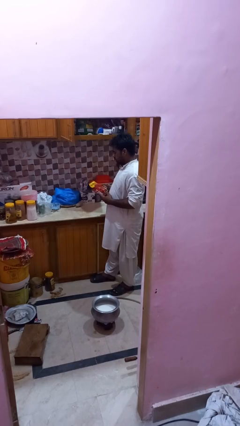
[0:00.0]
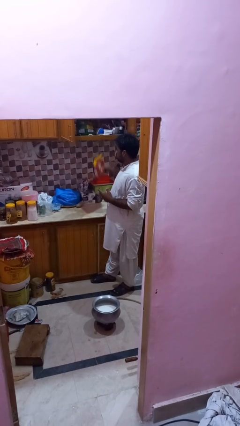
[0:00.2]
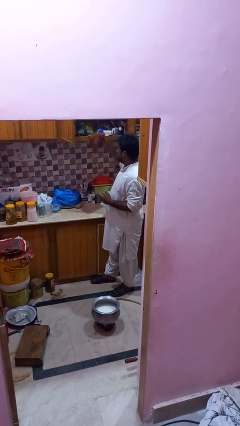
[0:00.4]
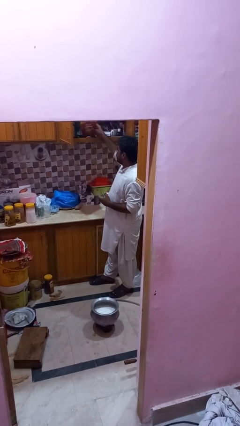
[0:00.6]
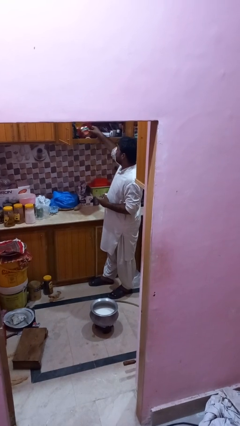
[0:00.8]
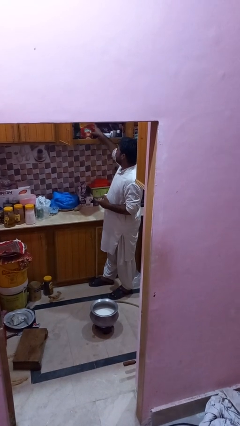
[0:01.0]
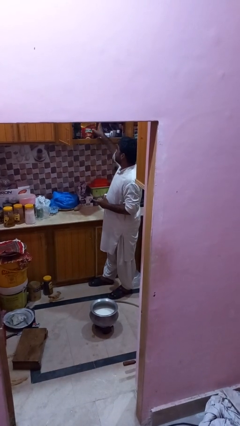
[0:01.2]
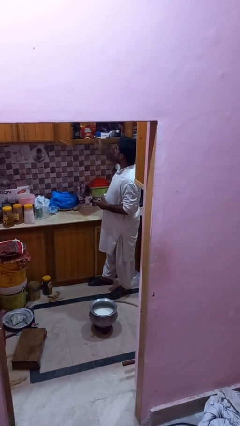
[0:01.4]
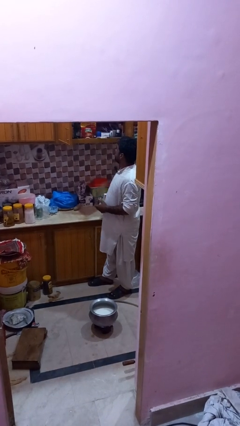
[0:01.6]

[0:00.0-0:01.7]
person puts down object into cabinet

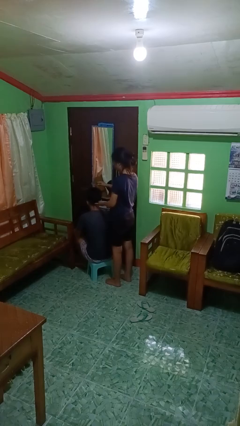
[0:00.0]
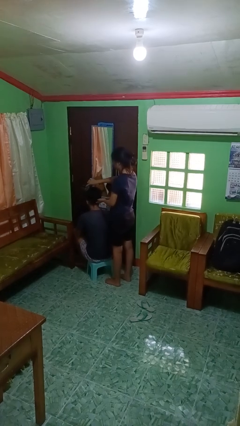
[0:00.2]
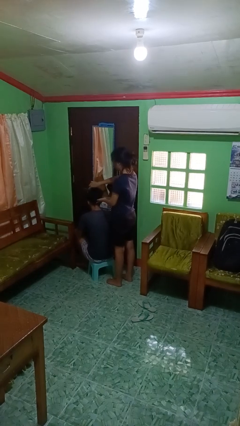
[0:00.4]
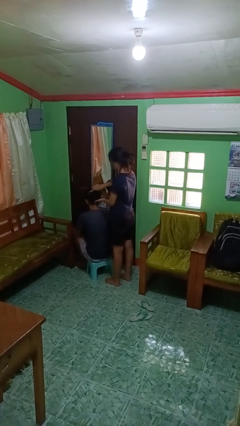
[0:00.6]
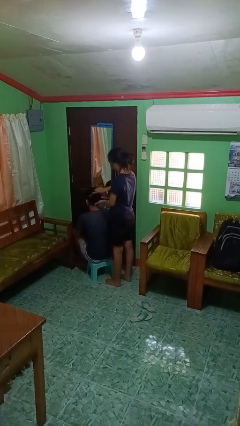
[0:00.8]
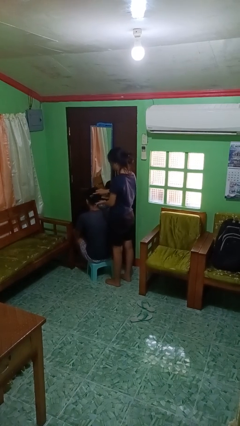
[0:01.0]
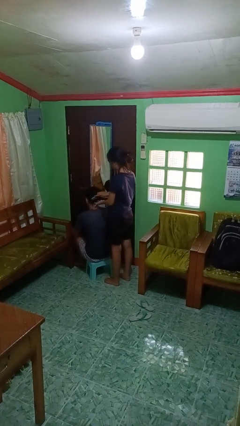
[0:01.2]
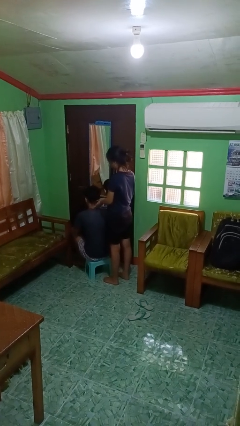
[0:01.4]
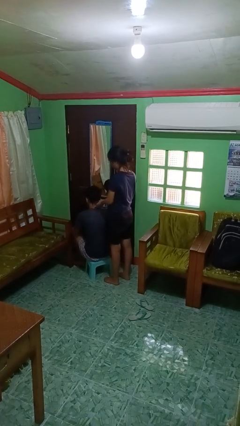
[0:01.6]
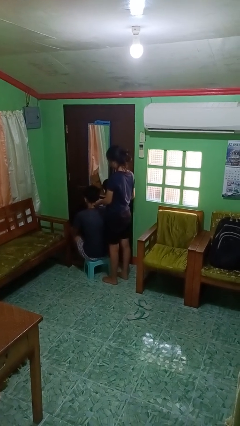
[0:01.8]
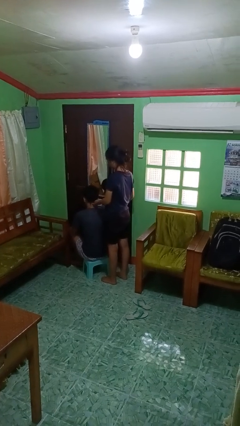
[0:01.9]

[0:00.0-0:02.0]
person brushes hair of person

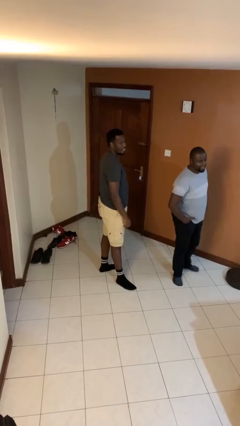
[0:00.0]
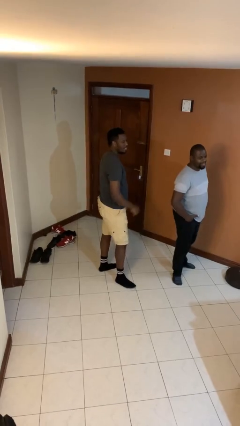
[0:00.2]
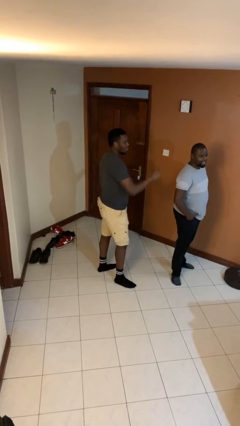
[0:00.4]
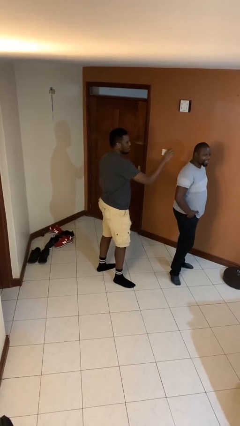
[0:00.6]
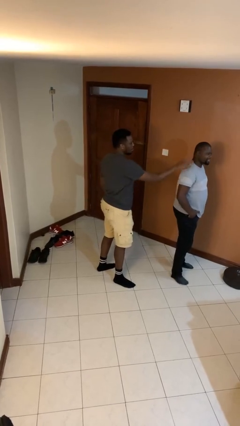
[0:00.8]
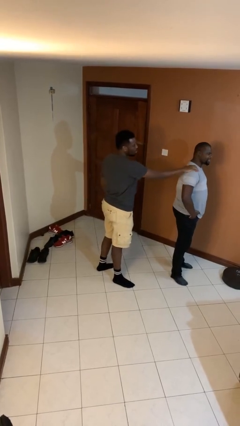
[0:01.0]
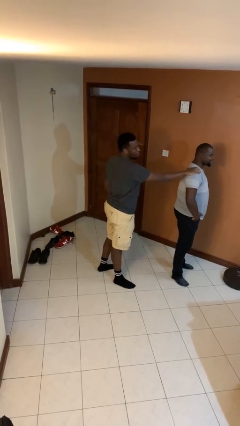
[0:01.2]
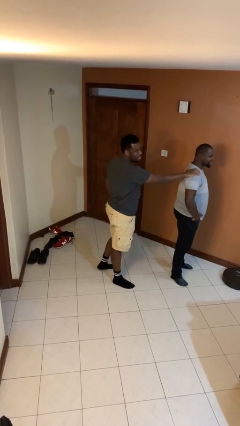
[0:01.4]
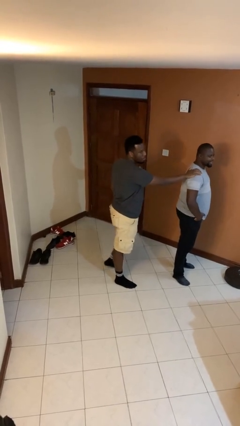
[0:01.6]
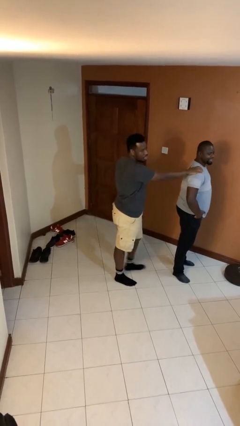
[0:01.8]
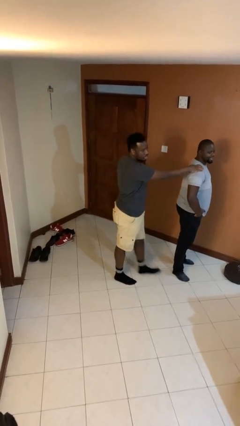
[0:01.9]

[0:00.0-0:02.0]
person grabs person by shoulder

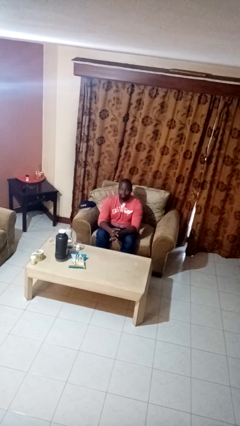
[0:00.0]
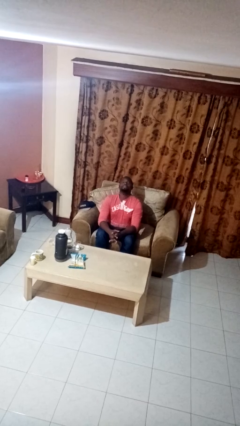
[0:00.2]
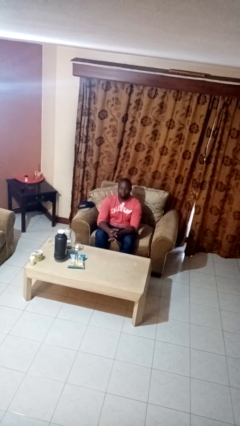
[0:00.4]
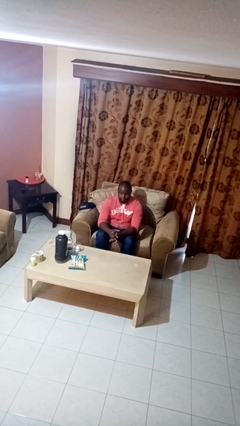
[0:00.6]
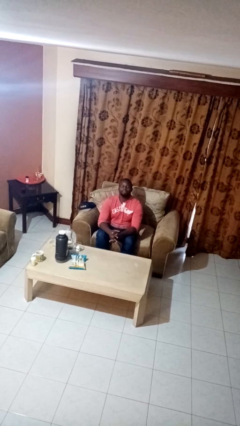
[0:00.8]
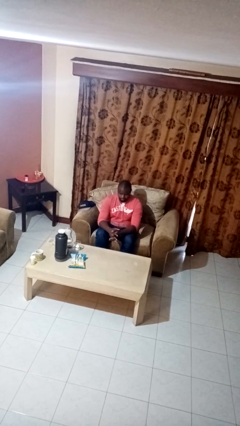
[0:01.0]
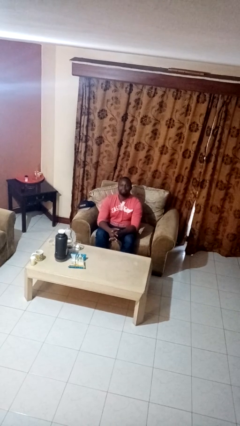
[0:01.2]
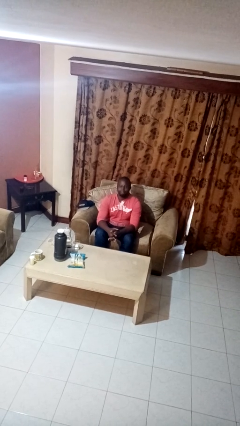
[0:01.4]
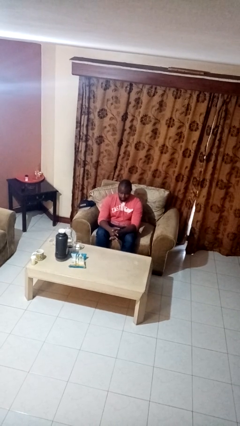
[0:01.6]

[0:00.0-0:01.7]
person nods head

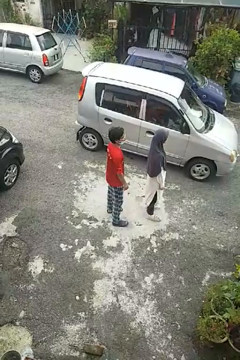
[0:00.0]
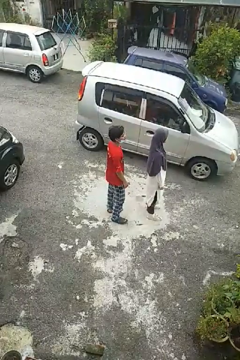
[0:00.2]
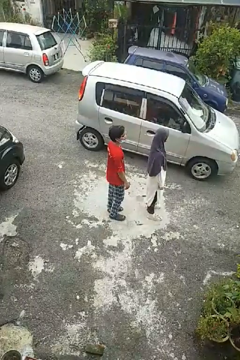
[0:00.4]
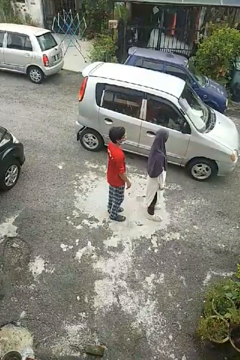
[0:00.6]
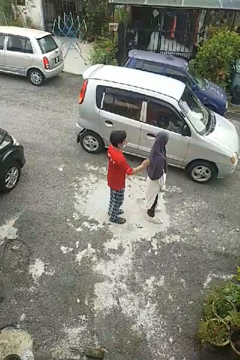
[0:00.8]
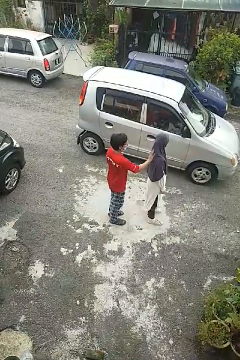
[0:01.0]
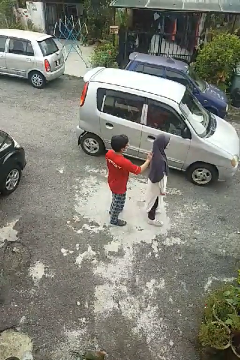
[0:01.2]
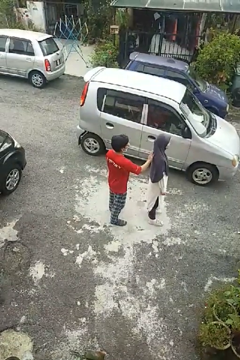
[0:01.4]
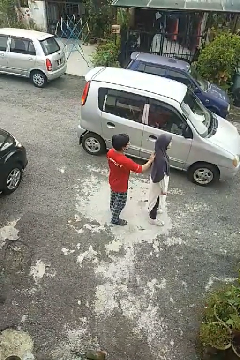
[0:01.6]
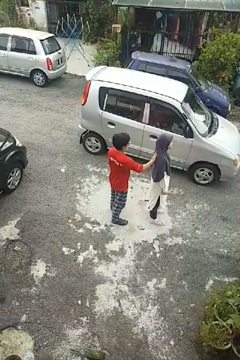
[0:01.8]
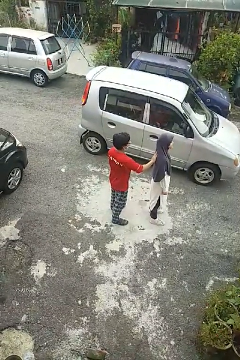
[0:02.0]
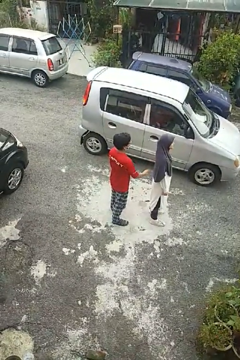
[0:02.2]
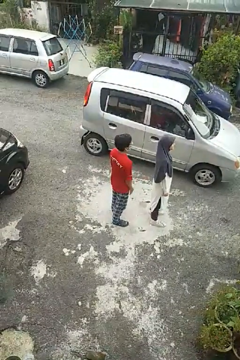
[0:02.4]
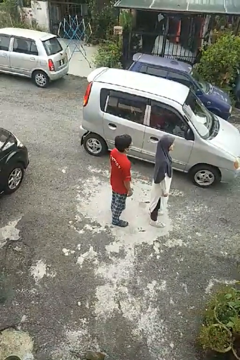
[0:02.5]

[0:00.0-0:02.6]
person touches back of person

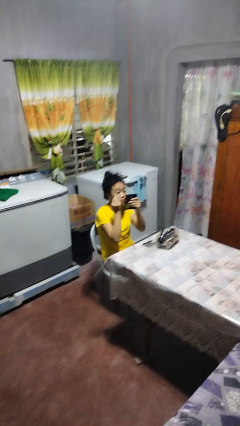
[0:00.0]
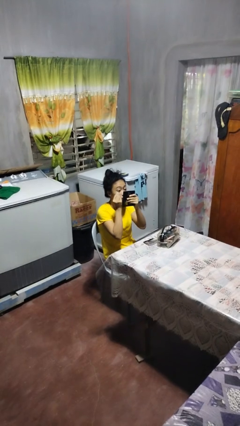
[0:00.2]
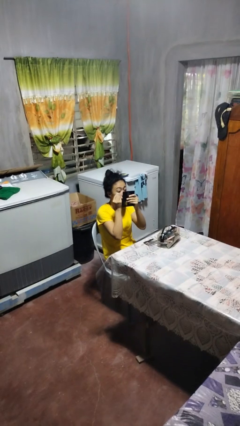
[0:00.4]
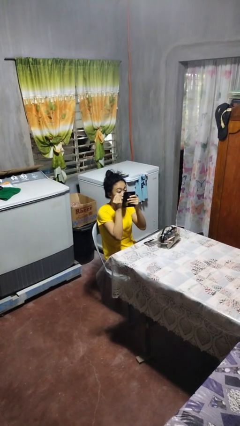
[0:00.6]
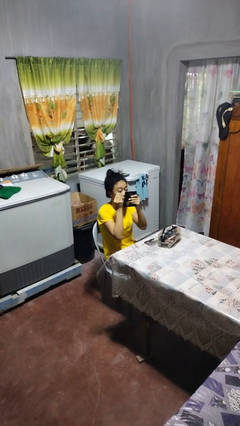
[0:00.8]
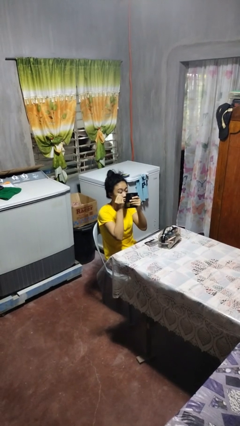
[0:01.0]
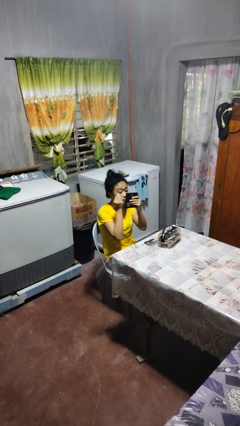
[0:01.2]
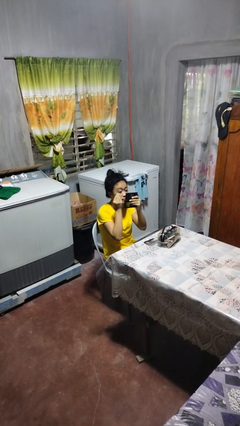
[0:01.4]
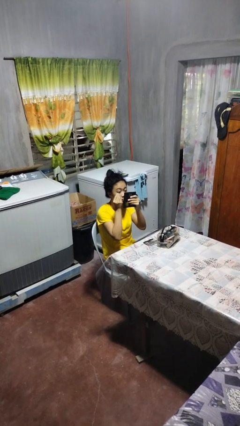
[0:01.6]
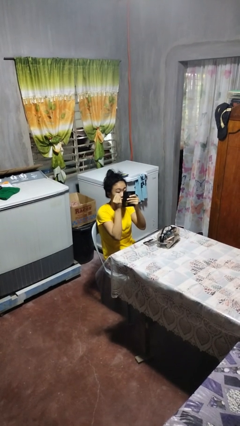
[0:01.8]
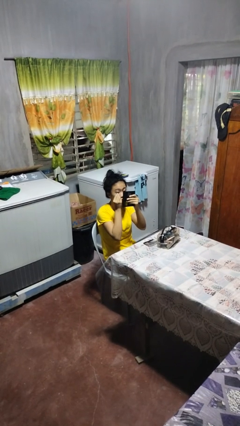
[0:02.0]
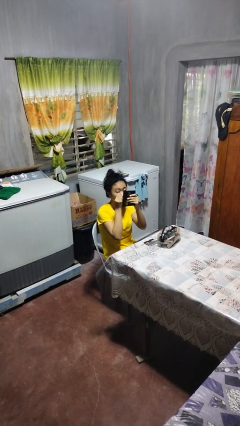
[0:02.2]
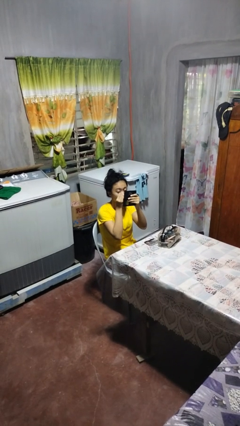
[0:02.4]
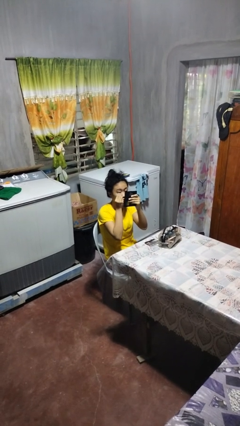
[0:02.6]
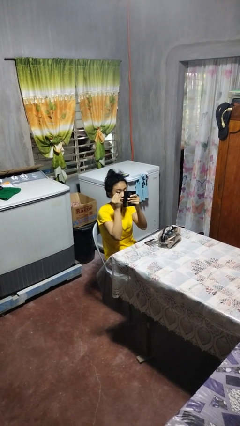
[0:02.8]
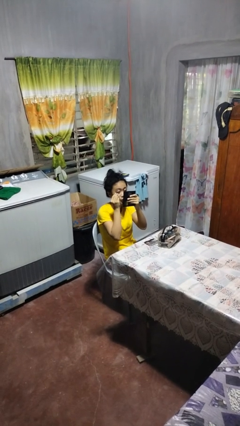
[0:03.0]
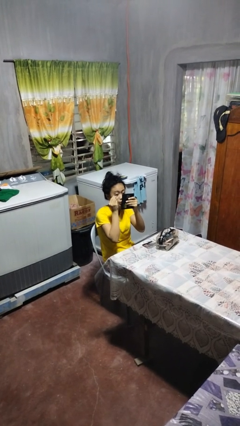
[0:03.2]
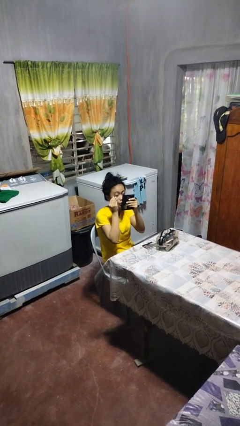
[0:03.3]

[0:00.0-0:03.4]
person applies eye makeup

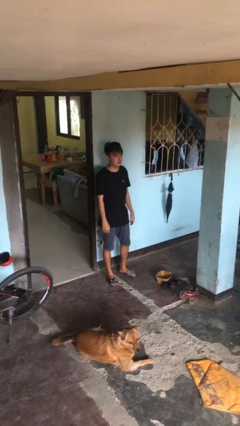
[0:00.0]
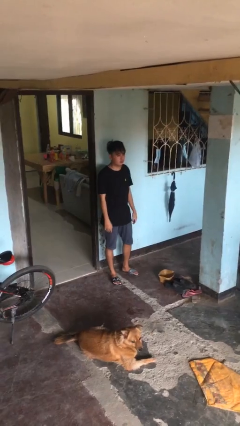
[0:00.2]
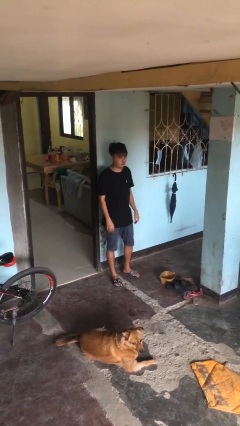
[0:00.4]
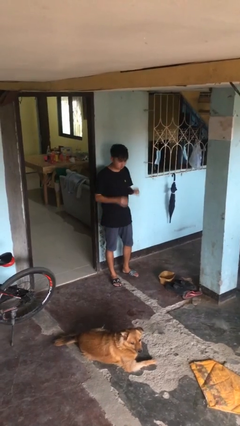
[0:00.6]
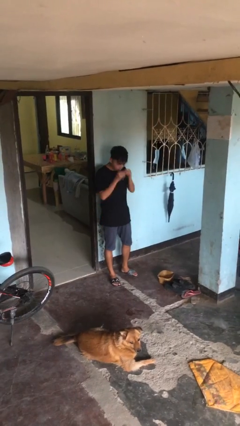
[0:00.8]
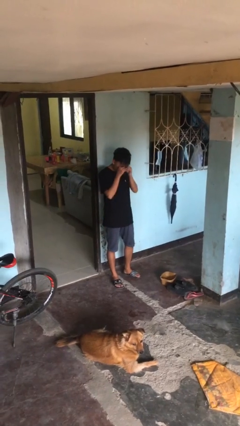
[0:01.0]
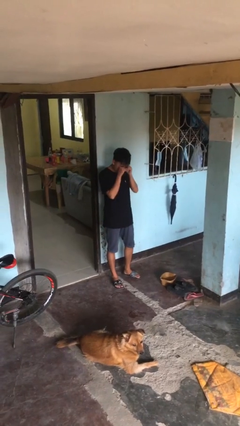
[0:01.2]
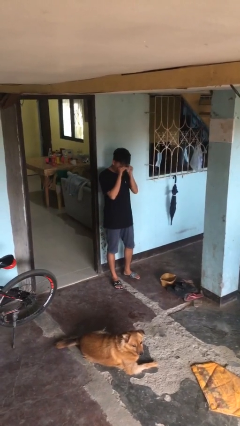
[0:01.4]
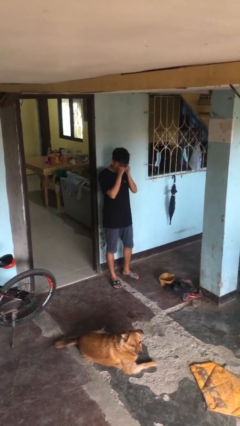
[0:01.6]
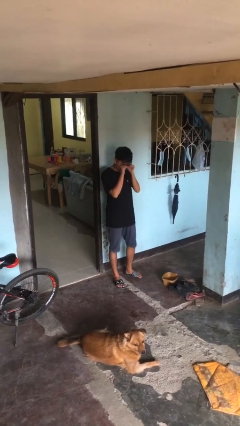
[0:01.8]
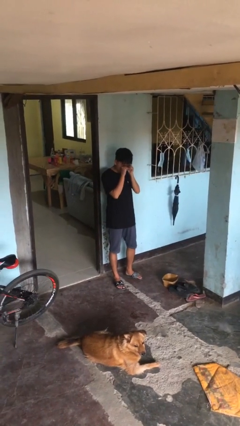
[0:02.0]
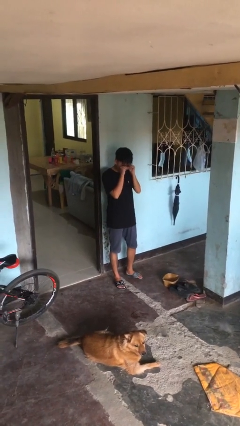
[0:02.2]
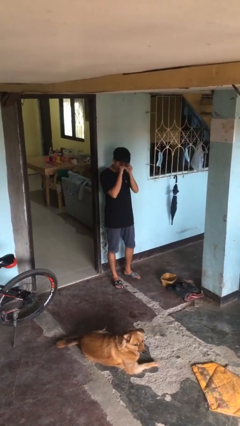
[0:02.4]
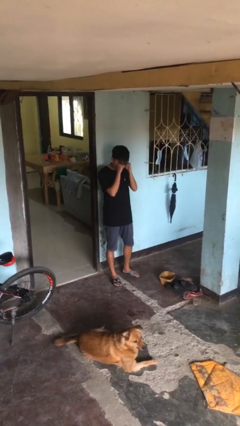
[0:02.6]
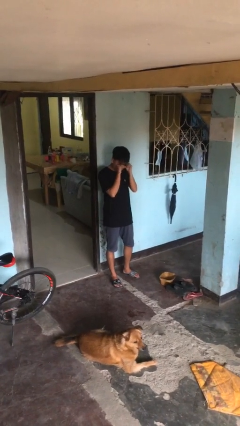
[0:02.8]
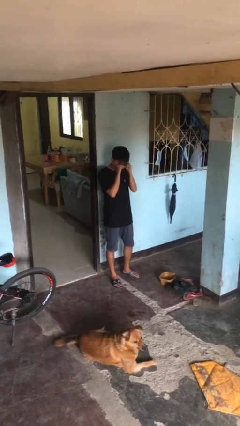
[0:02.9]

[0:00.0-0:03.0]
person rubs eyes

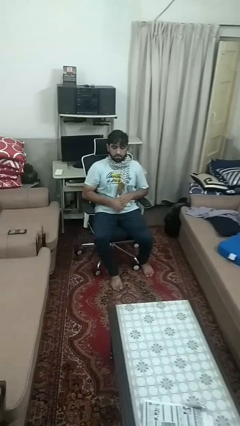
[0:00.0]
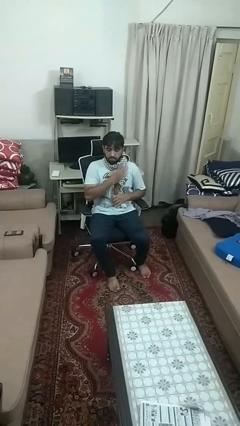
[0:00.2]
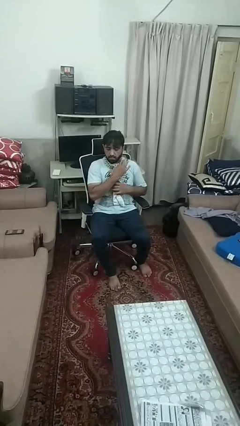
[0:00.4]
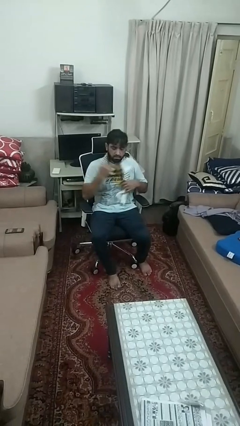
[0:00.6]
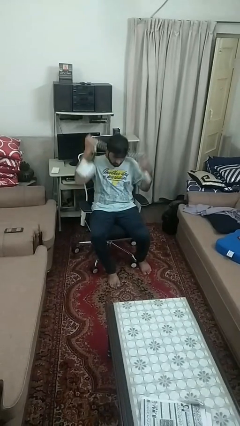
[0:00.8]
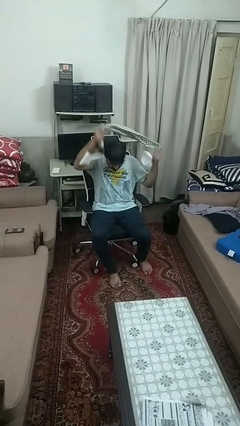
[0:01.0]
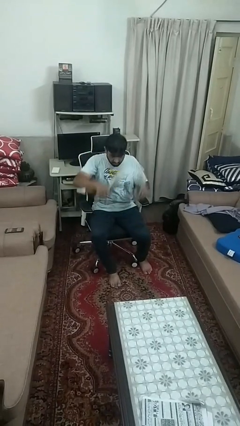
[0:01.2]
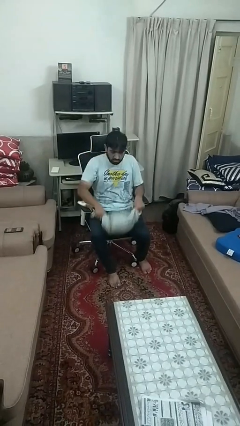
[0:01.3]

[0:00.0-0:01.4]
person takes off scarf
